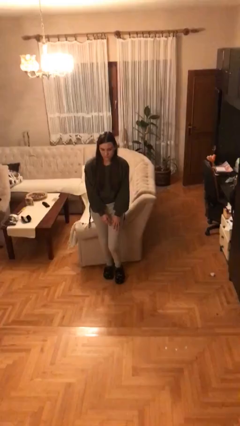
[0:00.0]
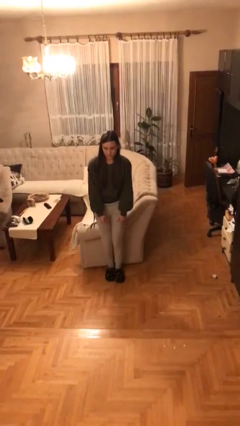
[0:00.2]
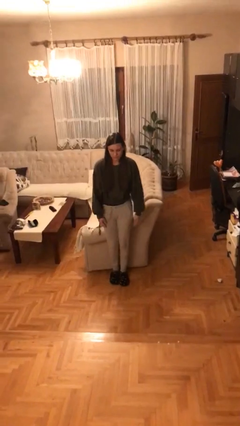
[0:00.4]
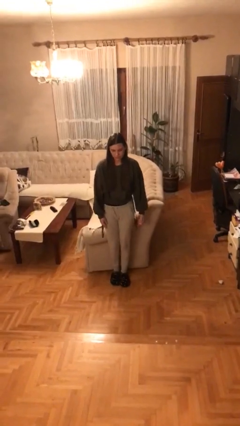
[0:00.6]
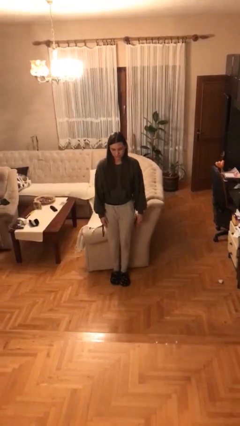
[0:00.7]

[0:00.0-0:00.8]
person stands up from floor

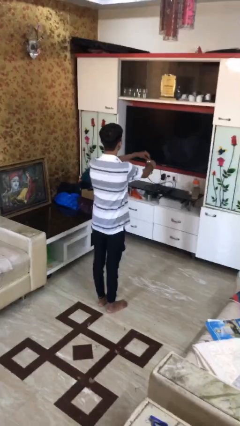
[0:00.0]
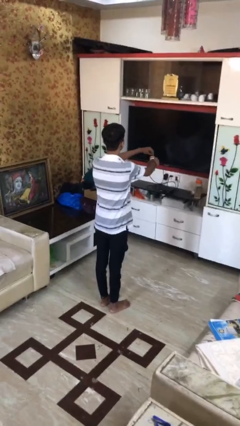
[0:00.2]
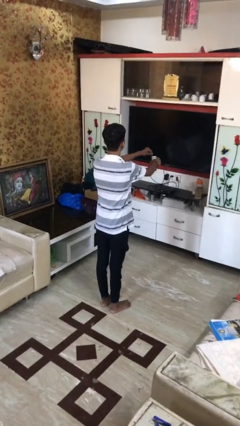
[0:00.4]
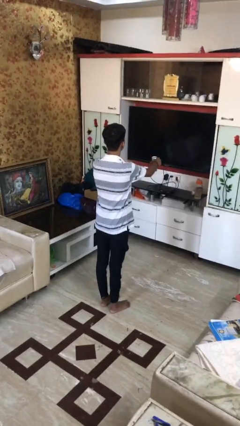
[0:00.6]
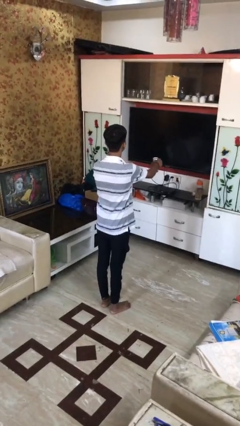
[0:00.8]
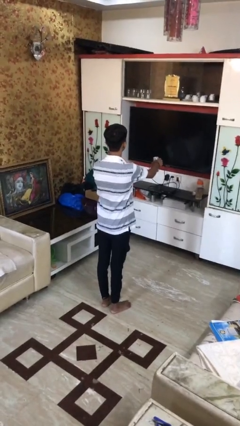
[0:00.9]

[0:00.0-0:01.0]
person opens beverage can

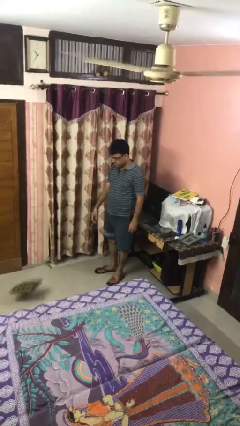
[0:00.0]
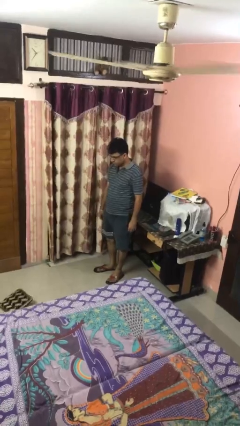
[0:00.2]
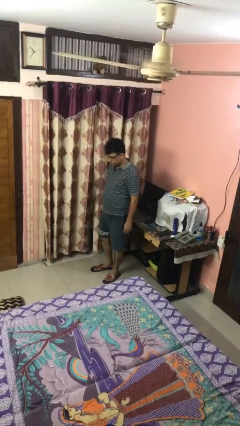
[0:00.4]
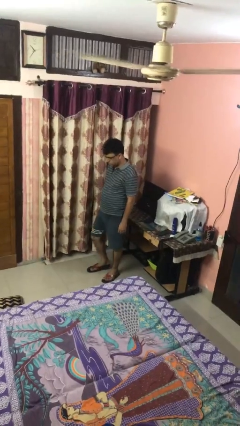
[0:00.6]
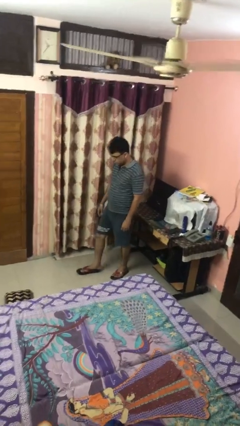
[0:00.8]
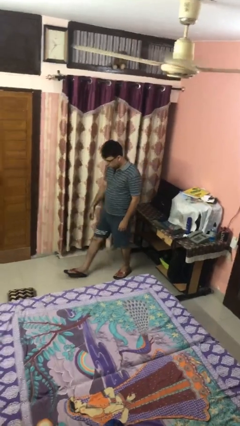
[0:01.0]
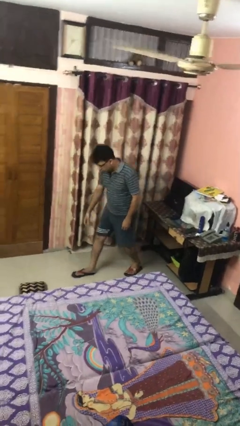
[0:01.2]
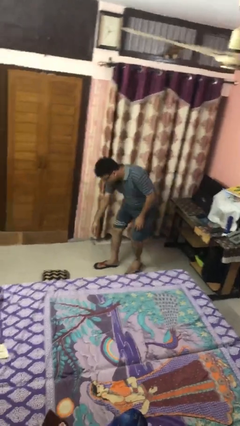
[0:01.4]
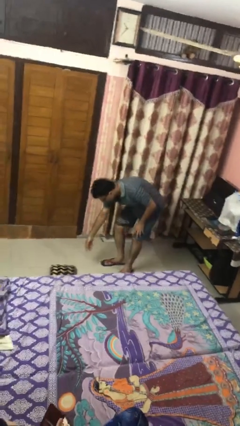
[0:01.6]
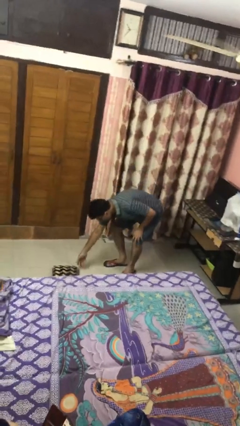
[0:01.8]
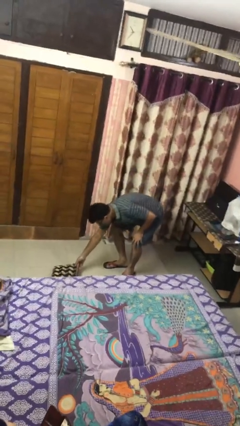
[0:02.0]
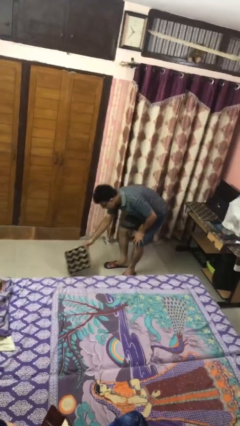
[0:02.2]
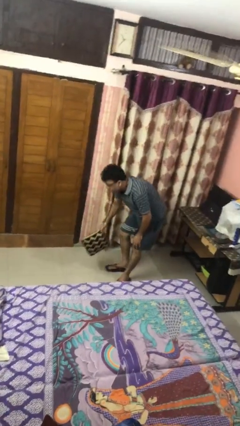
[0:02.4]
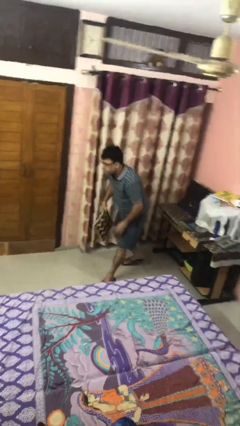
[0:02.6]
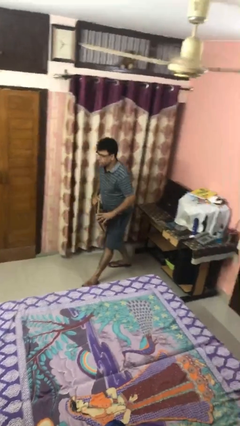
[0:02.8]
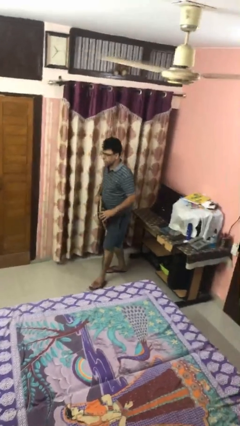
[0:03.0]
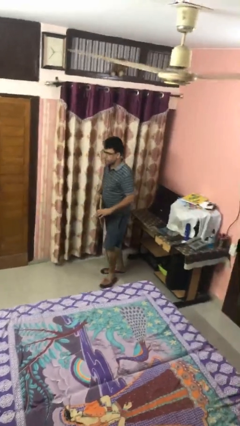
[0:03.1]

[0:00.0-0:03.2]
person picks up object from floor

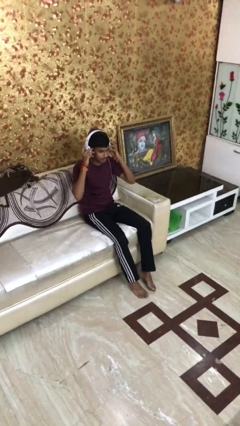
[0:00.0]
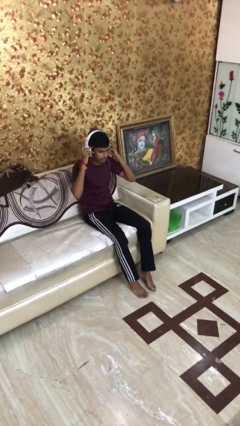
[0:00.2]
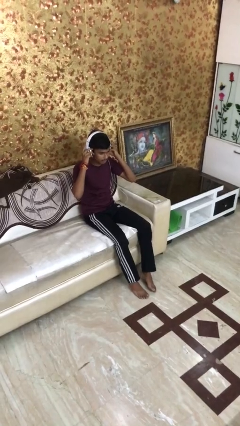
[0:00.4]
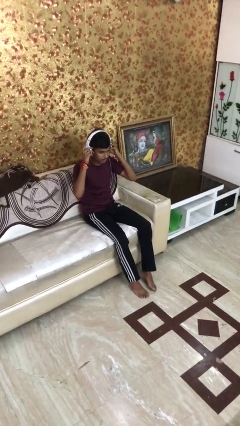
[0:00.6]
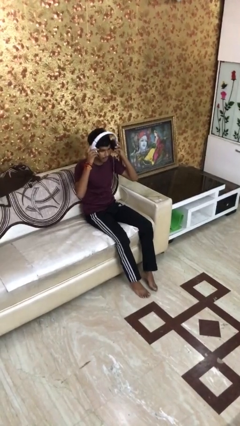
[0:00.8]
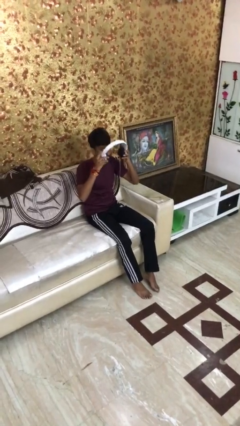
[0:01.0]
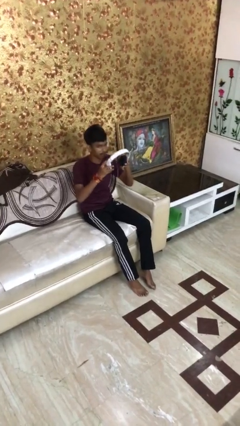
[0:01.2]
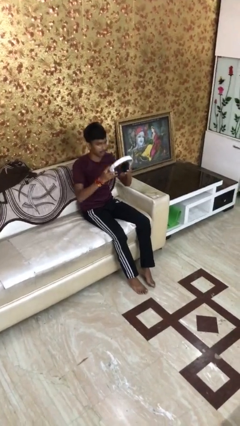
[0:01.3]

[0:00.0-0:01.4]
person takes off headphones

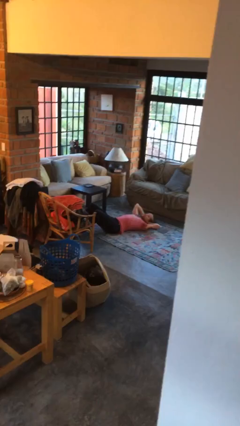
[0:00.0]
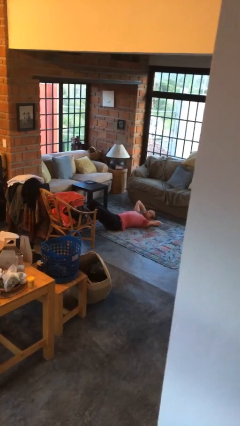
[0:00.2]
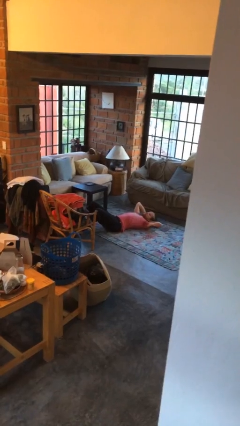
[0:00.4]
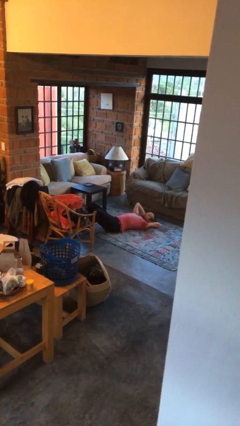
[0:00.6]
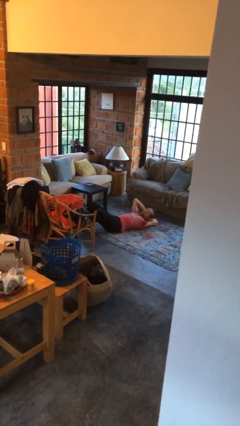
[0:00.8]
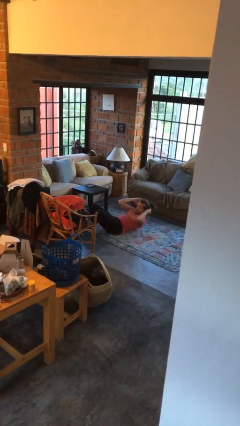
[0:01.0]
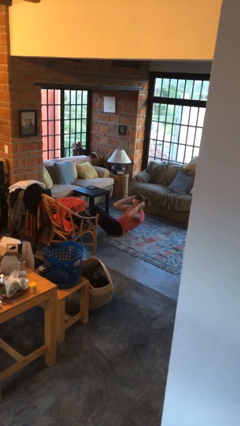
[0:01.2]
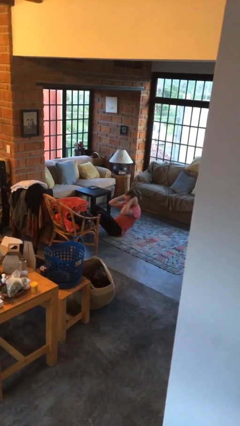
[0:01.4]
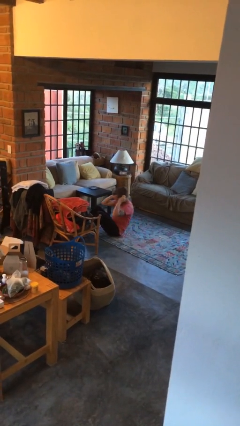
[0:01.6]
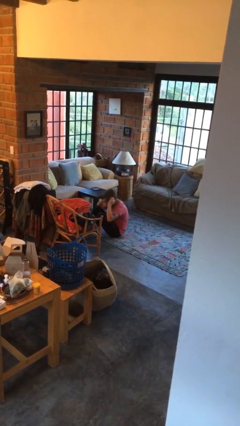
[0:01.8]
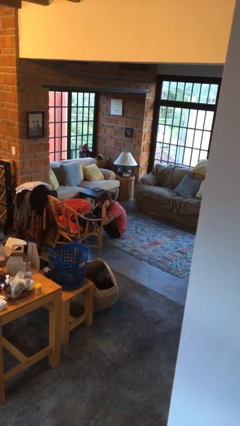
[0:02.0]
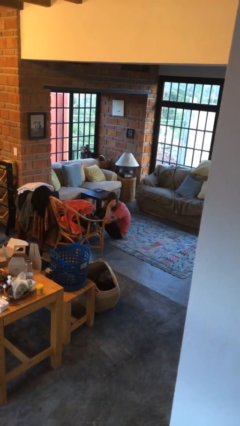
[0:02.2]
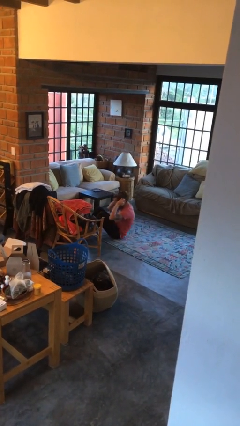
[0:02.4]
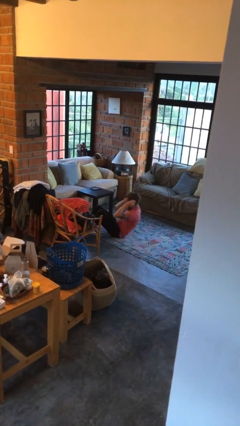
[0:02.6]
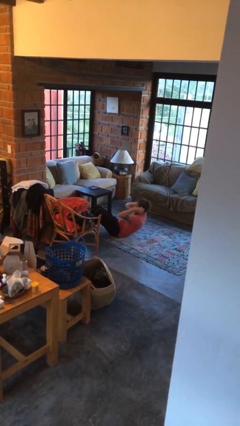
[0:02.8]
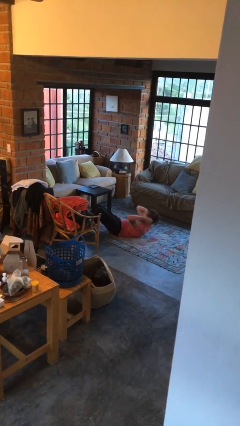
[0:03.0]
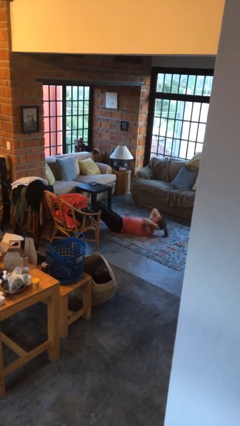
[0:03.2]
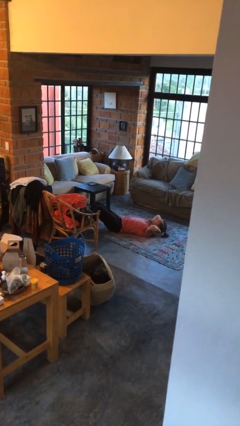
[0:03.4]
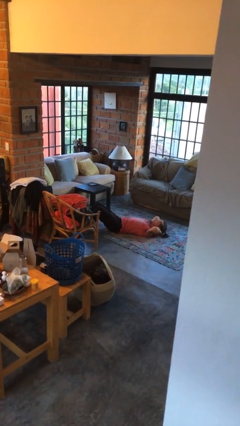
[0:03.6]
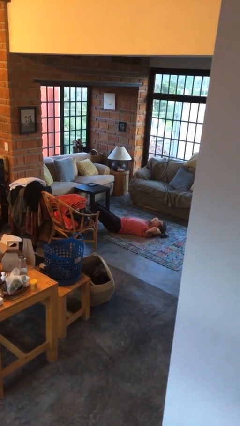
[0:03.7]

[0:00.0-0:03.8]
person exercises with situp

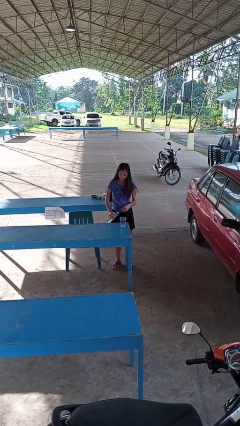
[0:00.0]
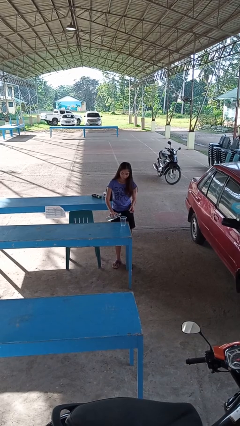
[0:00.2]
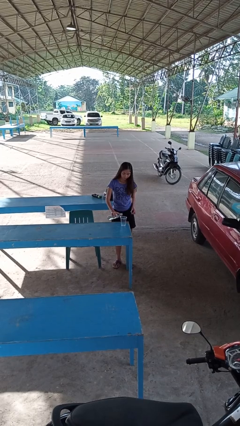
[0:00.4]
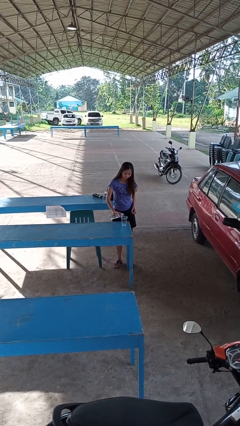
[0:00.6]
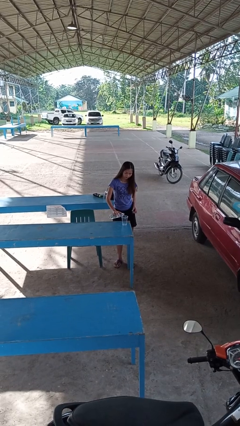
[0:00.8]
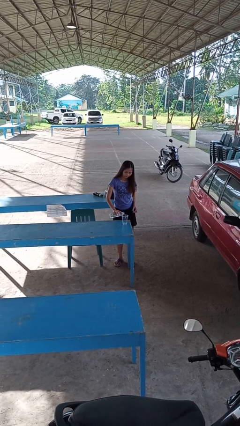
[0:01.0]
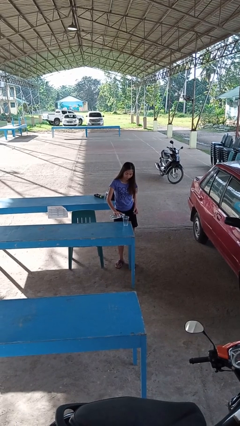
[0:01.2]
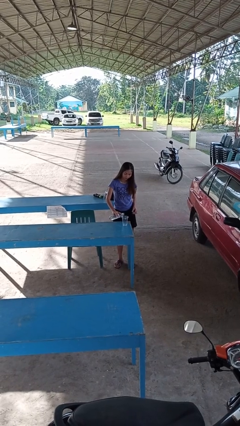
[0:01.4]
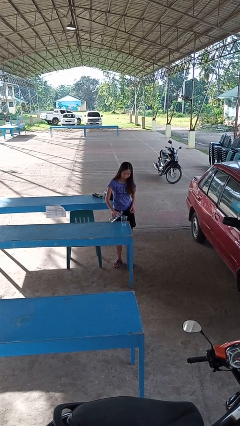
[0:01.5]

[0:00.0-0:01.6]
person pours liquid into cup

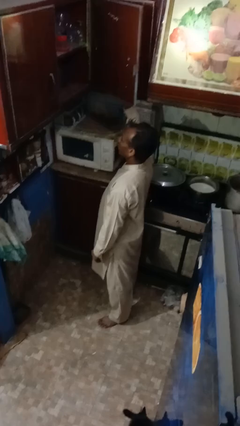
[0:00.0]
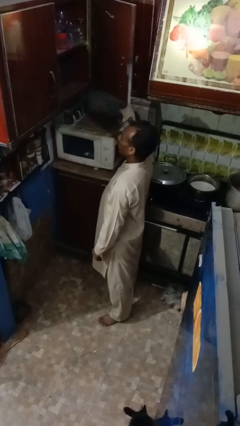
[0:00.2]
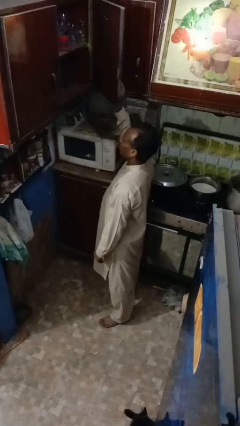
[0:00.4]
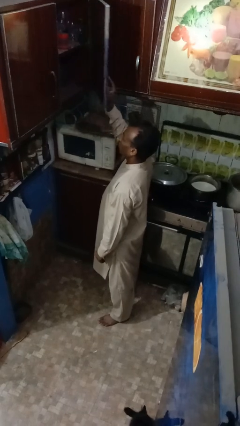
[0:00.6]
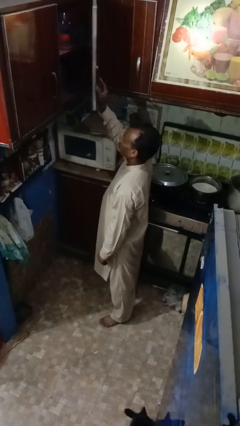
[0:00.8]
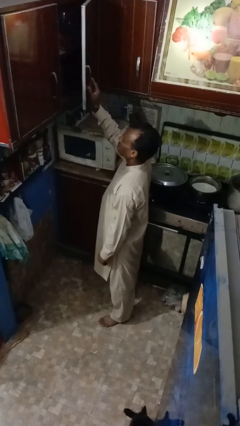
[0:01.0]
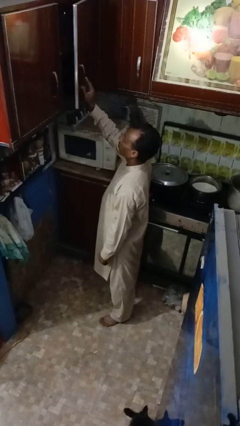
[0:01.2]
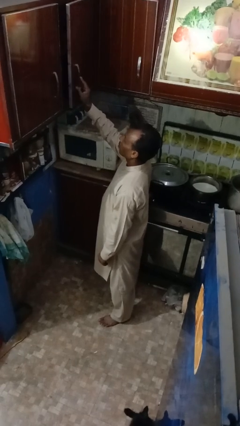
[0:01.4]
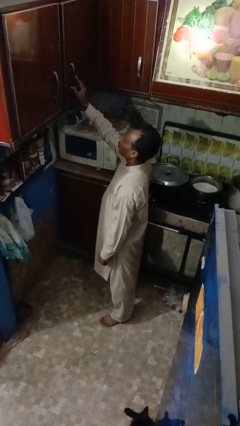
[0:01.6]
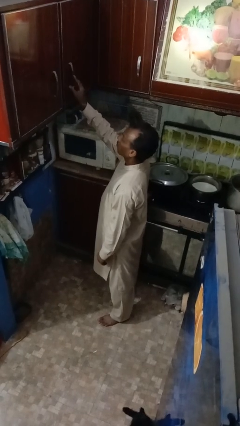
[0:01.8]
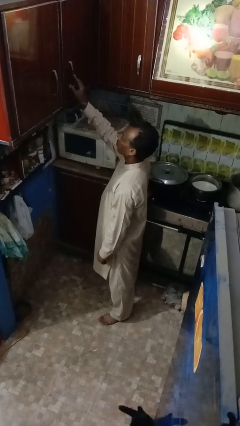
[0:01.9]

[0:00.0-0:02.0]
person closes cabinet

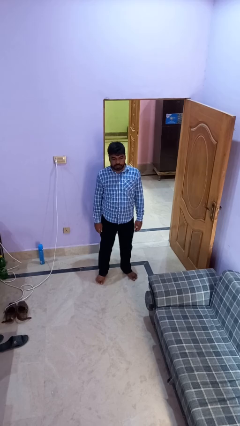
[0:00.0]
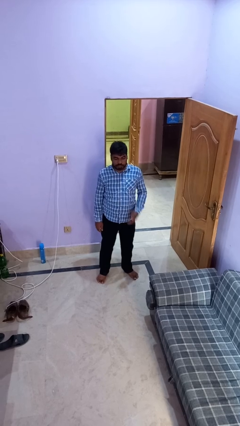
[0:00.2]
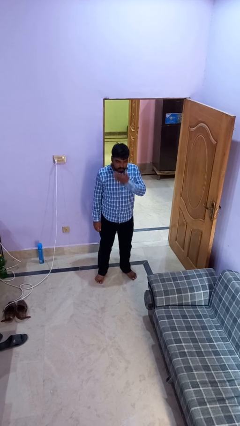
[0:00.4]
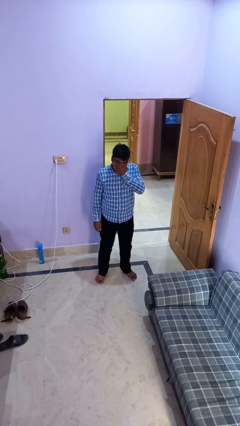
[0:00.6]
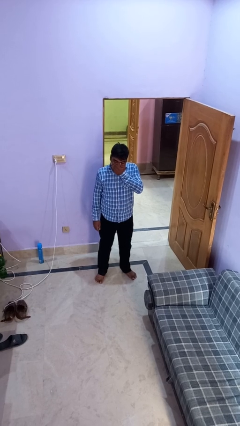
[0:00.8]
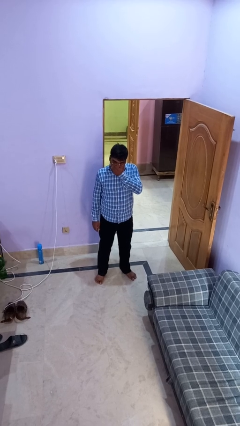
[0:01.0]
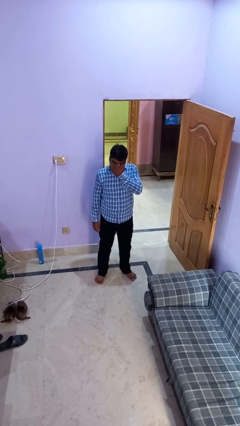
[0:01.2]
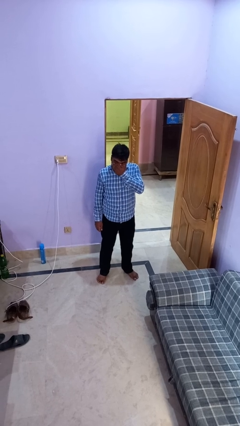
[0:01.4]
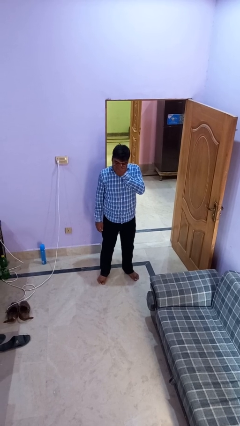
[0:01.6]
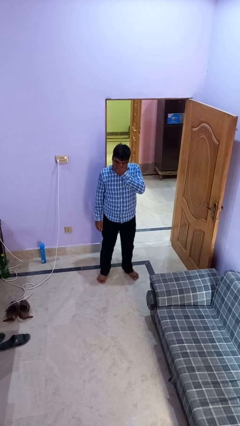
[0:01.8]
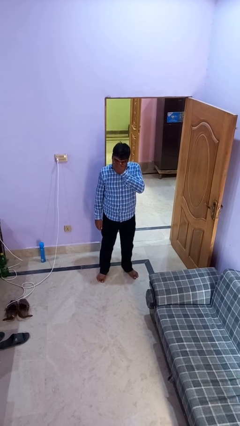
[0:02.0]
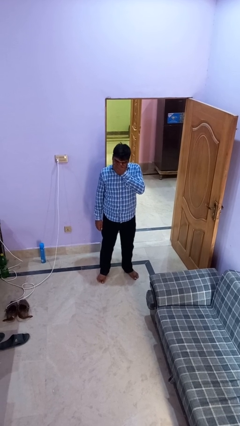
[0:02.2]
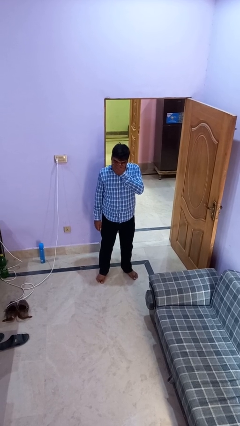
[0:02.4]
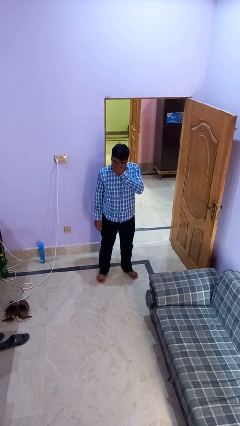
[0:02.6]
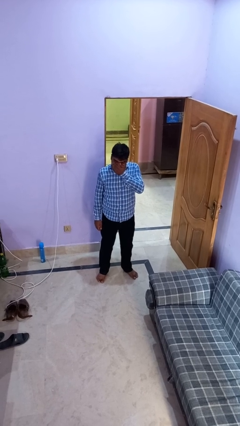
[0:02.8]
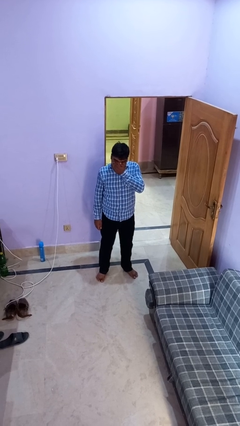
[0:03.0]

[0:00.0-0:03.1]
person sneezes into hand
